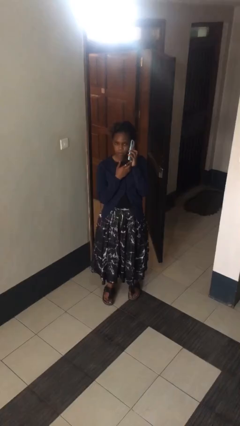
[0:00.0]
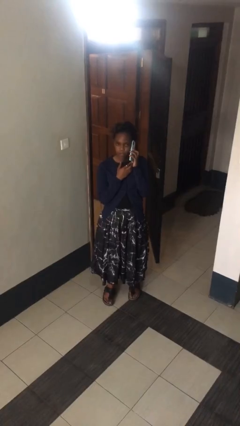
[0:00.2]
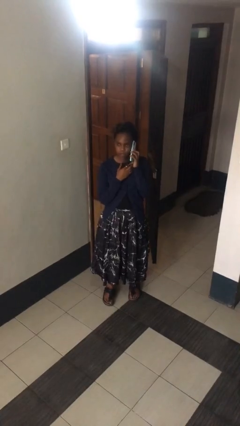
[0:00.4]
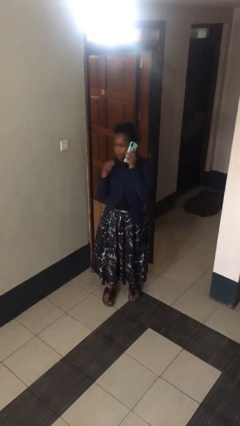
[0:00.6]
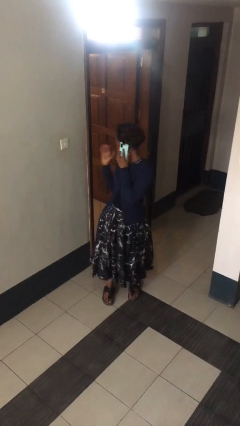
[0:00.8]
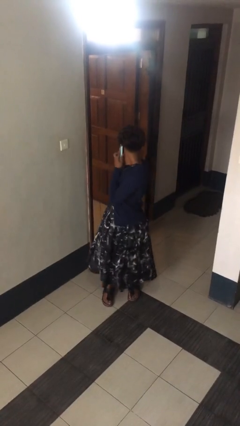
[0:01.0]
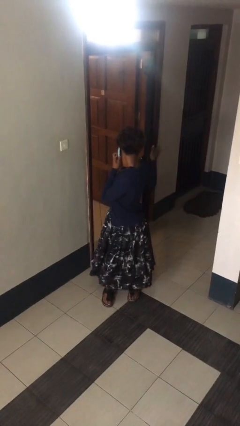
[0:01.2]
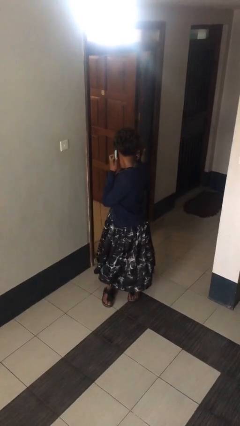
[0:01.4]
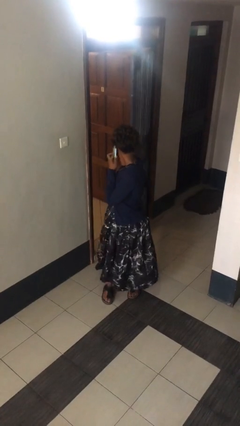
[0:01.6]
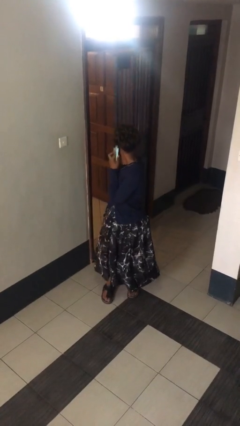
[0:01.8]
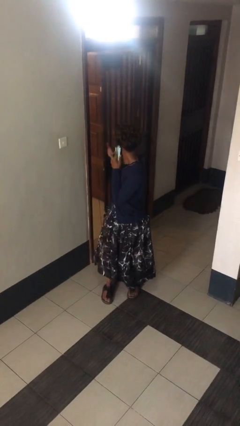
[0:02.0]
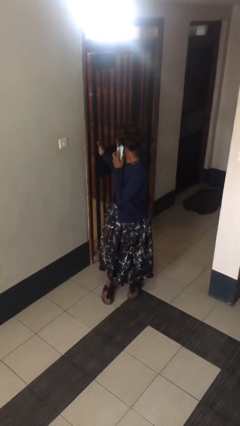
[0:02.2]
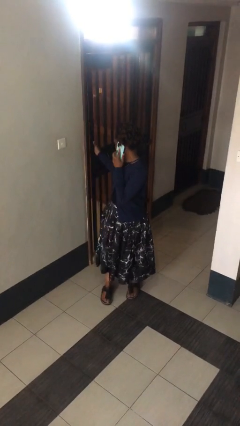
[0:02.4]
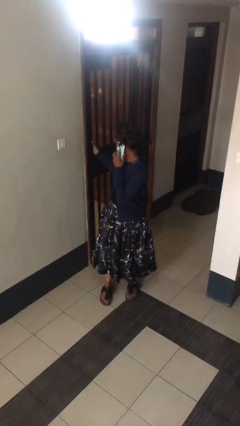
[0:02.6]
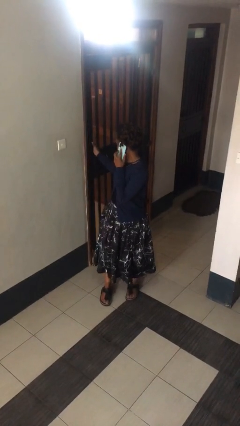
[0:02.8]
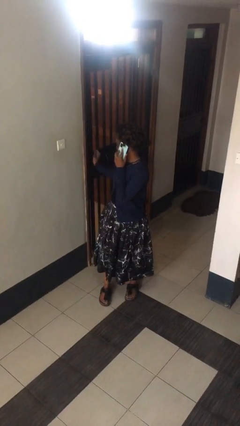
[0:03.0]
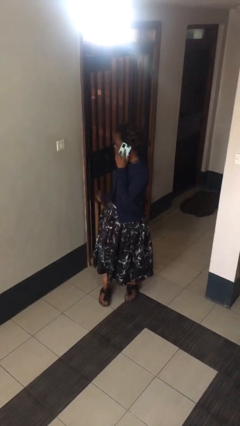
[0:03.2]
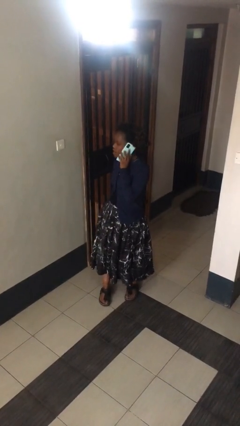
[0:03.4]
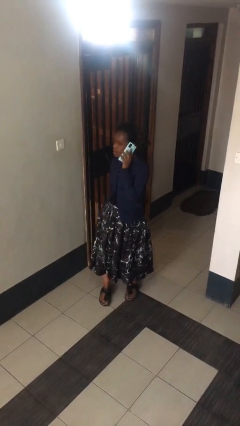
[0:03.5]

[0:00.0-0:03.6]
person closes facility door

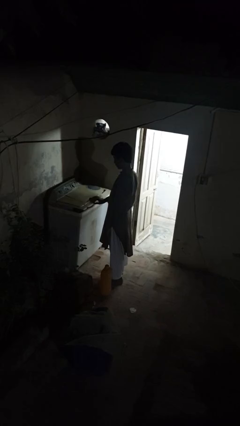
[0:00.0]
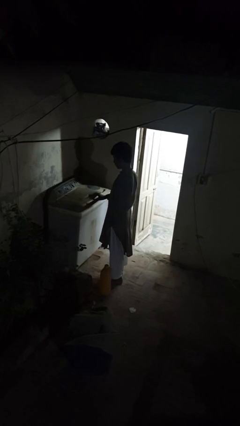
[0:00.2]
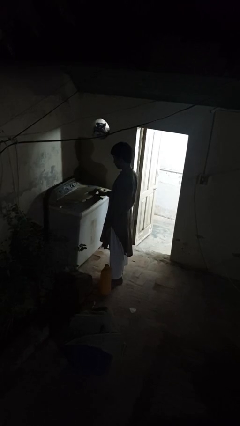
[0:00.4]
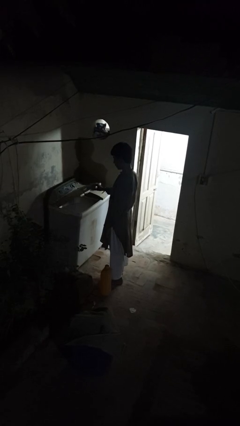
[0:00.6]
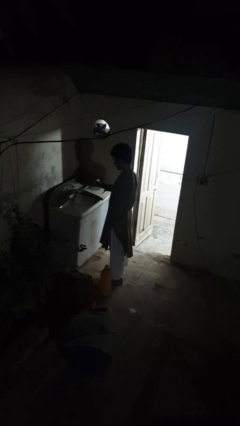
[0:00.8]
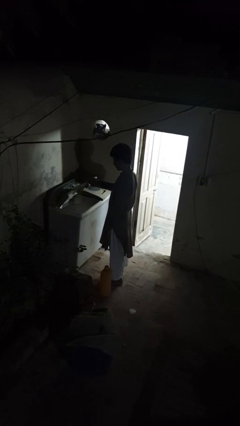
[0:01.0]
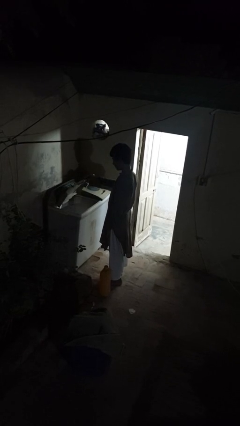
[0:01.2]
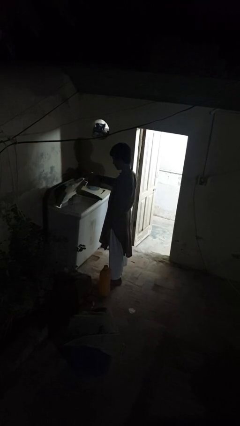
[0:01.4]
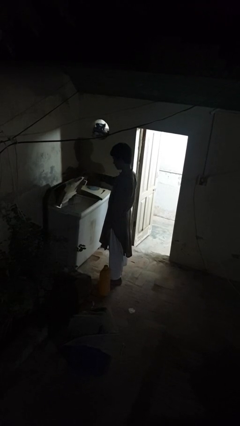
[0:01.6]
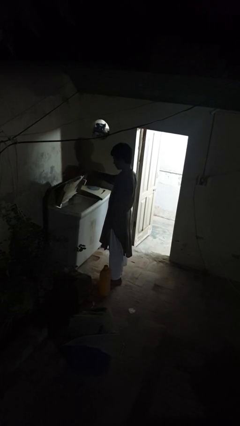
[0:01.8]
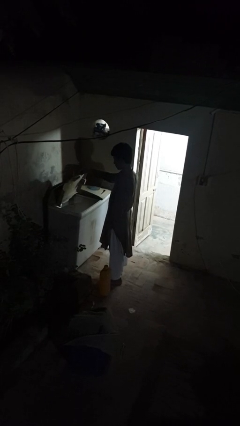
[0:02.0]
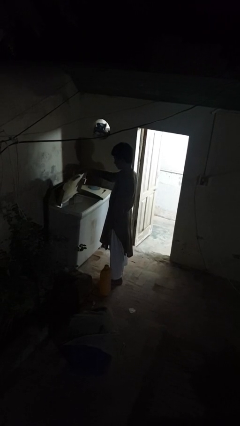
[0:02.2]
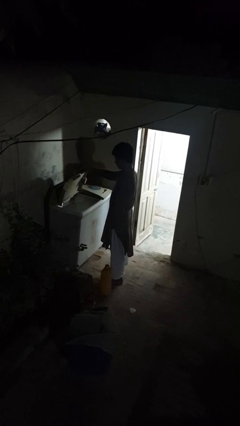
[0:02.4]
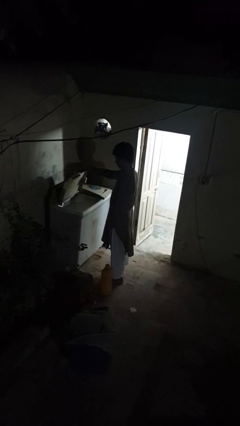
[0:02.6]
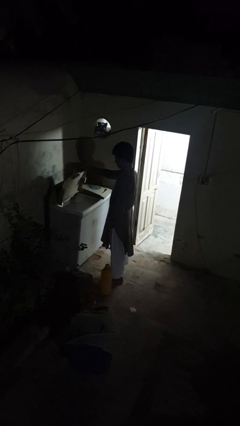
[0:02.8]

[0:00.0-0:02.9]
person opens clothes washer

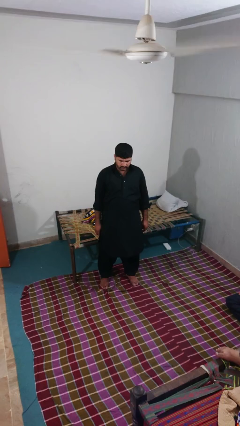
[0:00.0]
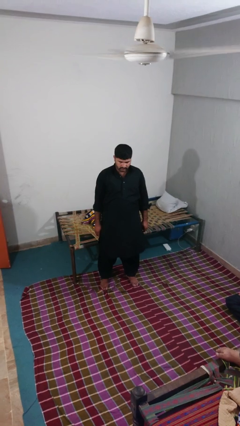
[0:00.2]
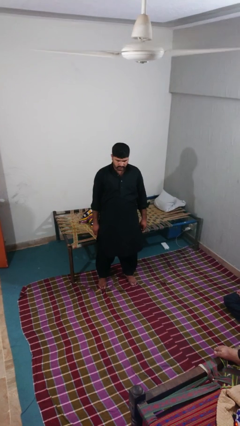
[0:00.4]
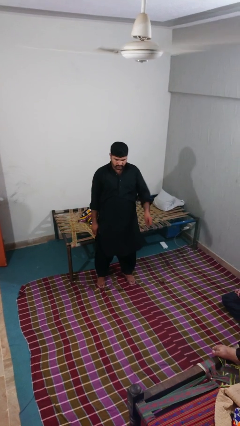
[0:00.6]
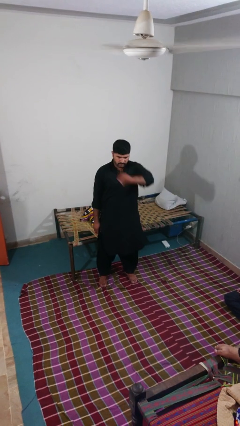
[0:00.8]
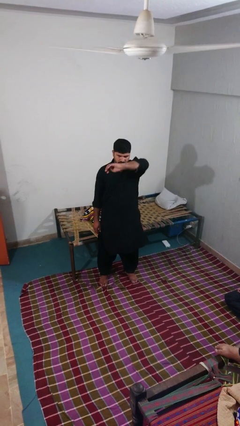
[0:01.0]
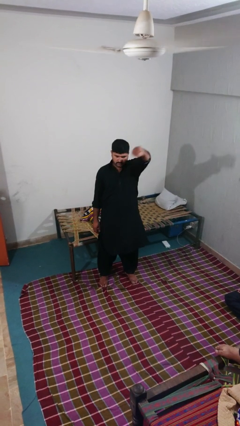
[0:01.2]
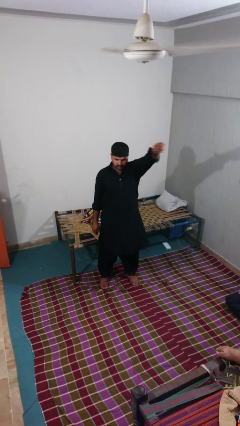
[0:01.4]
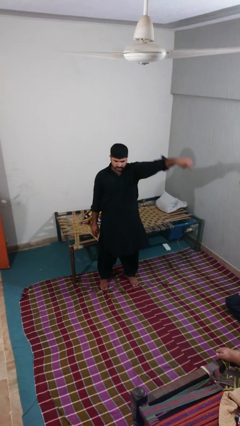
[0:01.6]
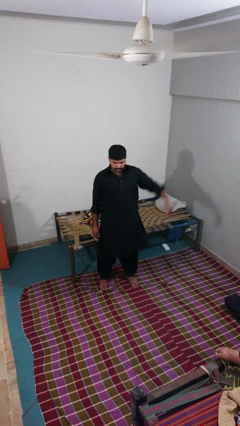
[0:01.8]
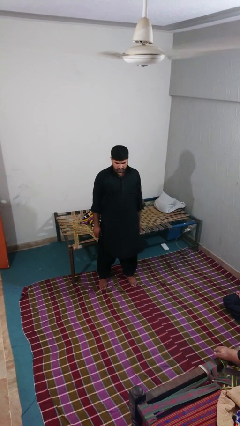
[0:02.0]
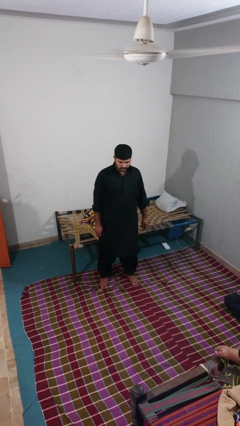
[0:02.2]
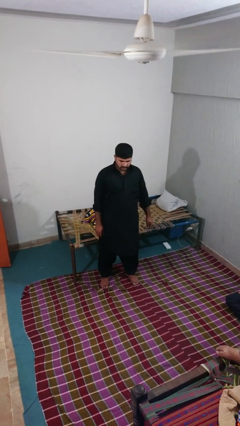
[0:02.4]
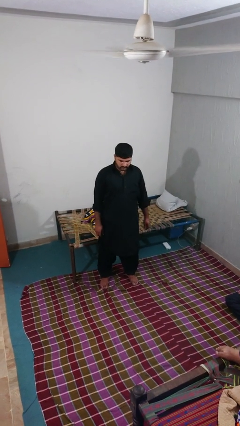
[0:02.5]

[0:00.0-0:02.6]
person gestures swipe left

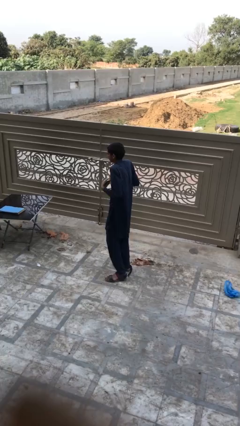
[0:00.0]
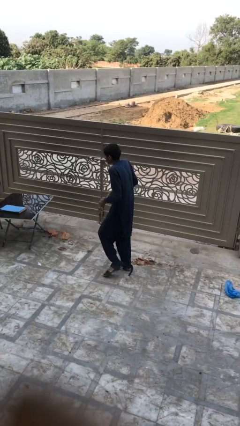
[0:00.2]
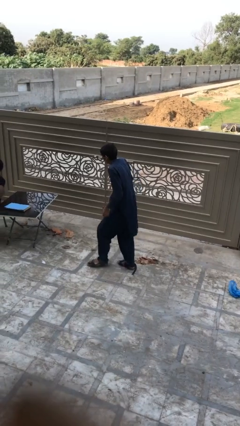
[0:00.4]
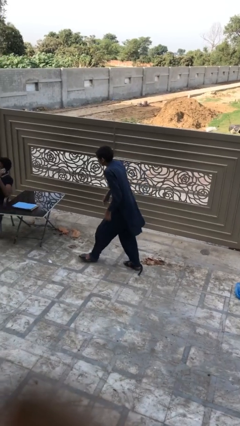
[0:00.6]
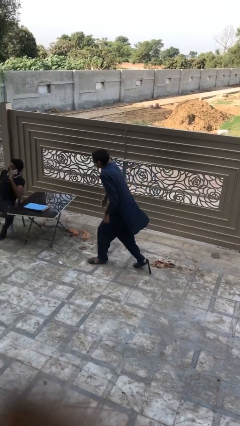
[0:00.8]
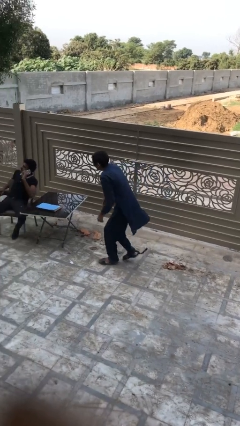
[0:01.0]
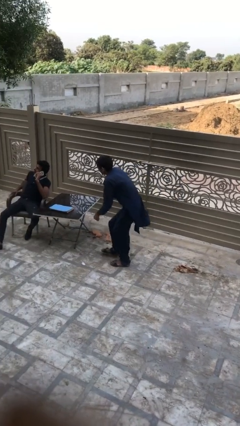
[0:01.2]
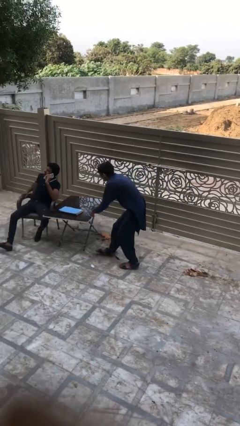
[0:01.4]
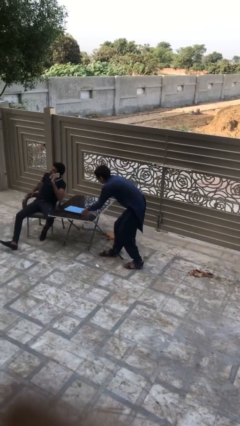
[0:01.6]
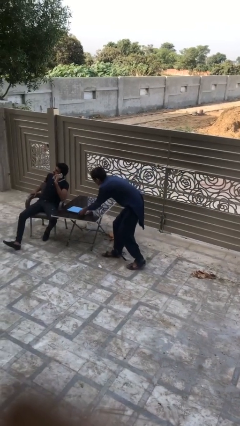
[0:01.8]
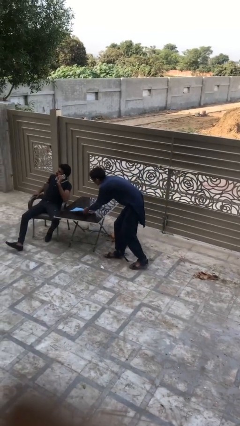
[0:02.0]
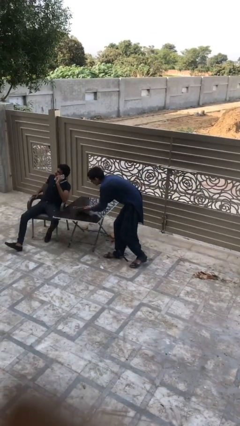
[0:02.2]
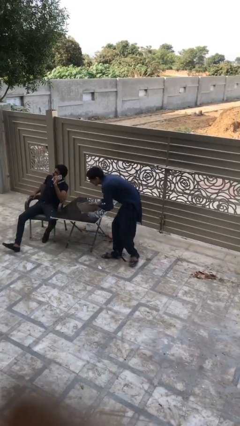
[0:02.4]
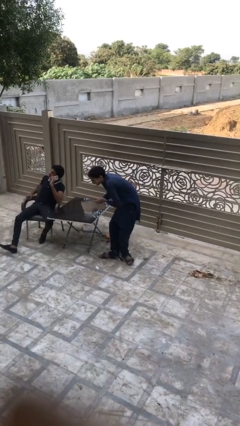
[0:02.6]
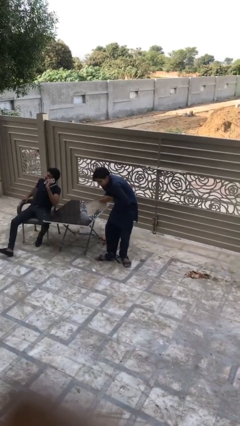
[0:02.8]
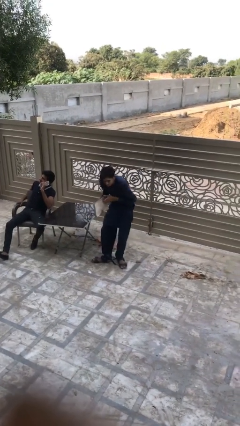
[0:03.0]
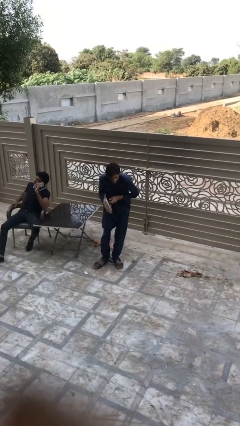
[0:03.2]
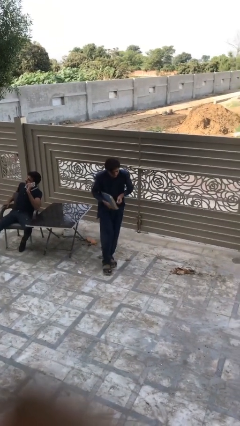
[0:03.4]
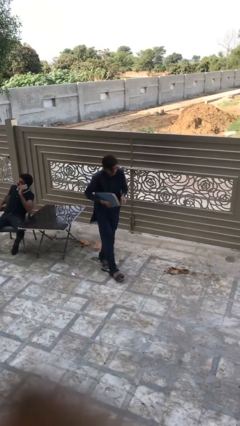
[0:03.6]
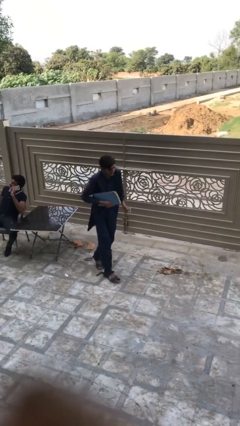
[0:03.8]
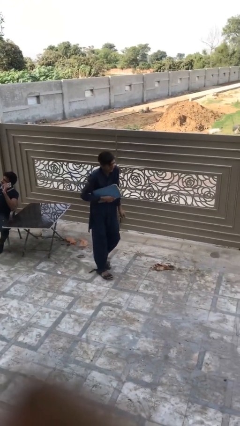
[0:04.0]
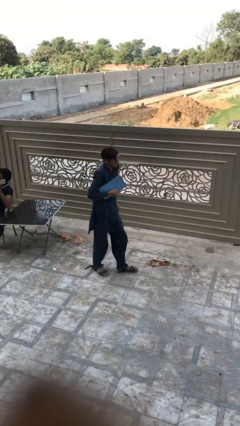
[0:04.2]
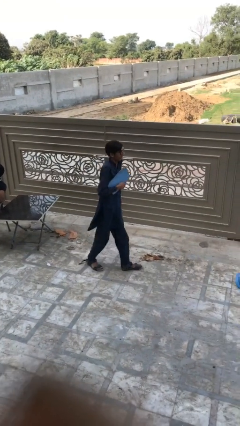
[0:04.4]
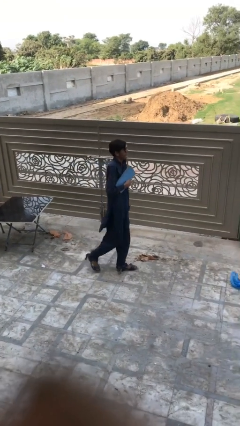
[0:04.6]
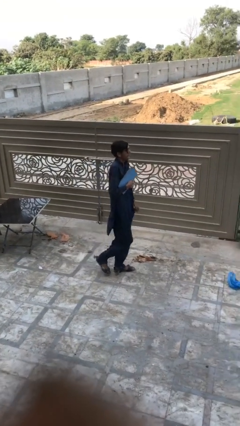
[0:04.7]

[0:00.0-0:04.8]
person steals object from person

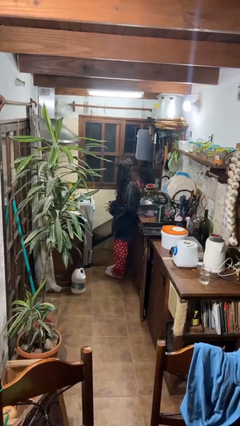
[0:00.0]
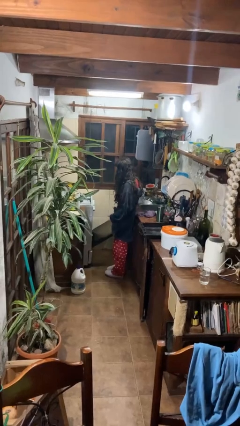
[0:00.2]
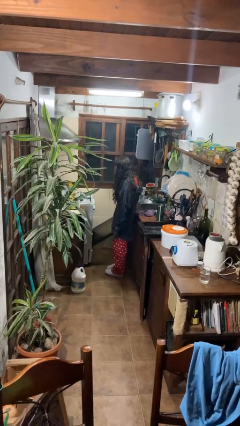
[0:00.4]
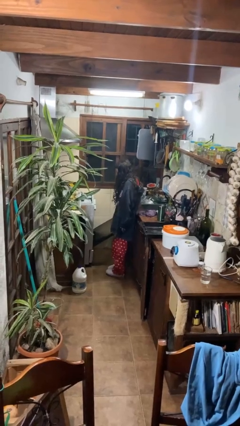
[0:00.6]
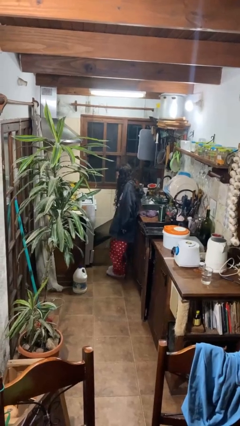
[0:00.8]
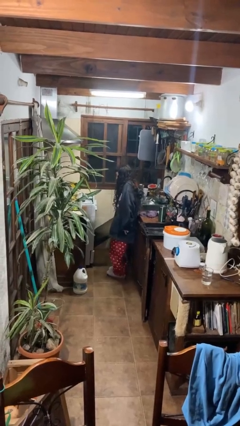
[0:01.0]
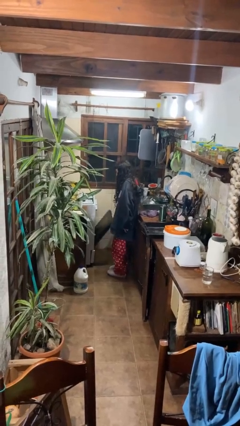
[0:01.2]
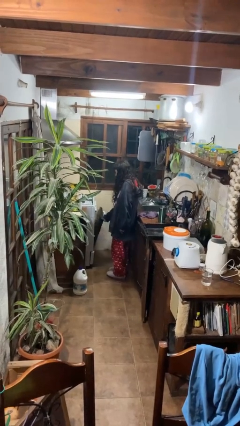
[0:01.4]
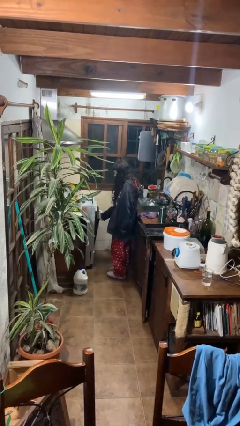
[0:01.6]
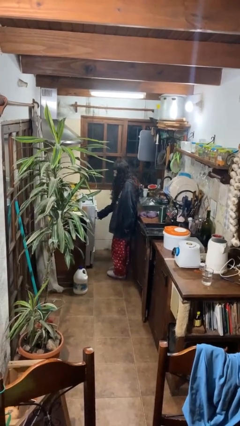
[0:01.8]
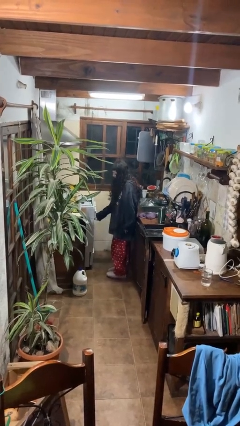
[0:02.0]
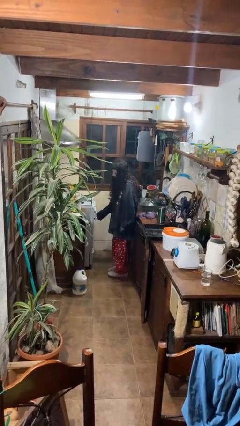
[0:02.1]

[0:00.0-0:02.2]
person closes oven door

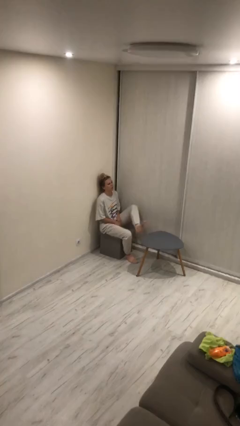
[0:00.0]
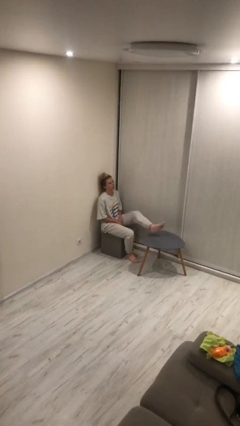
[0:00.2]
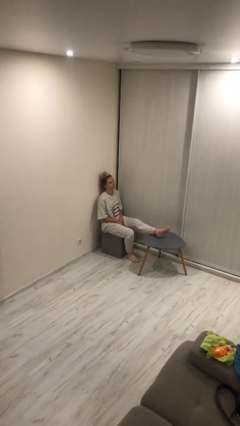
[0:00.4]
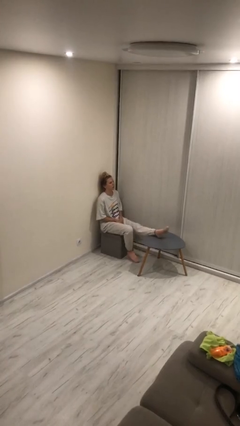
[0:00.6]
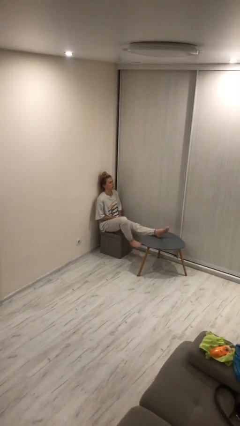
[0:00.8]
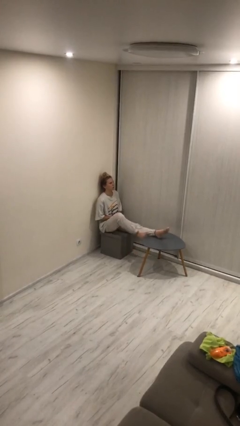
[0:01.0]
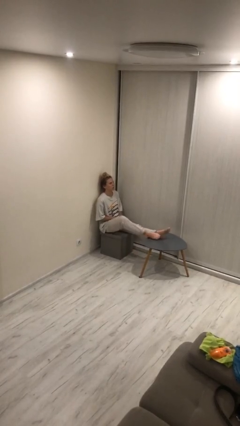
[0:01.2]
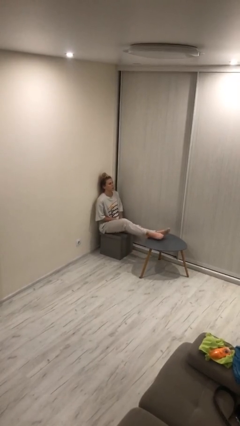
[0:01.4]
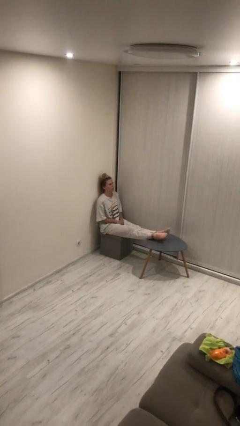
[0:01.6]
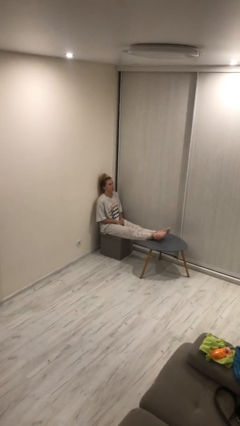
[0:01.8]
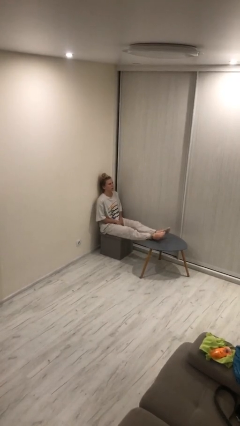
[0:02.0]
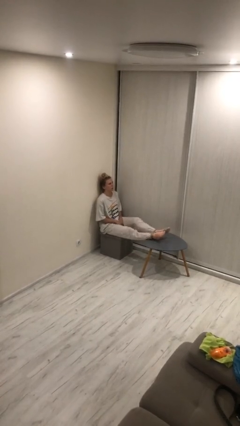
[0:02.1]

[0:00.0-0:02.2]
person puts feet up
